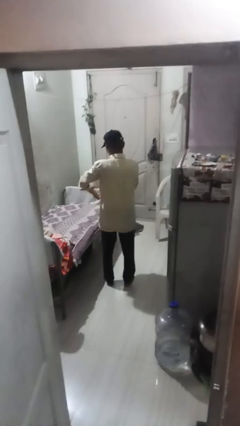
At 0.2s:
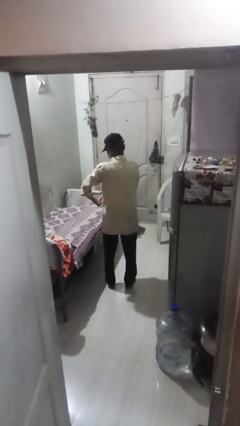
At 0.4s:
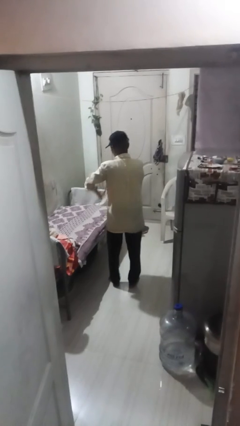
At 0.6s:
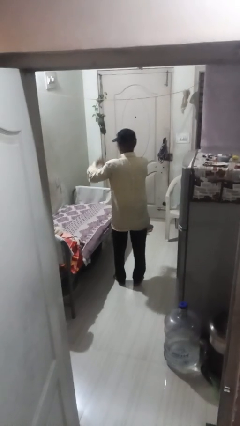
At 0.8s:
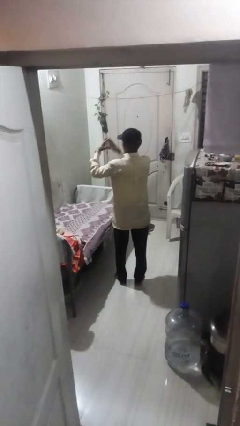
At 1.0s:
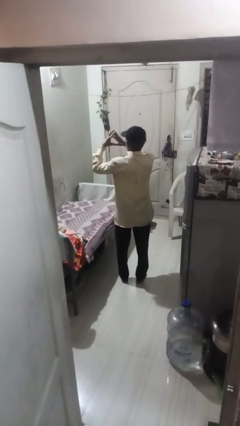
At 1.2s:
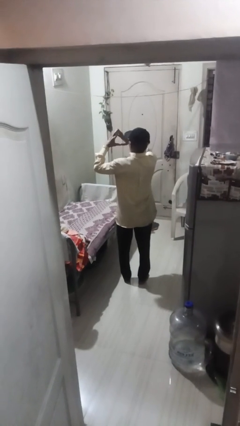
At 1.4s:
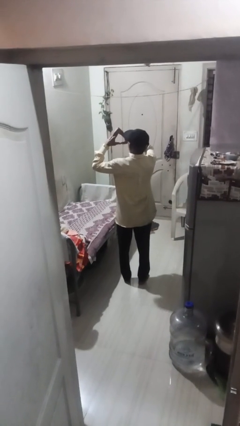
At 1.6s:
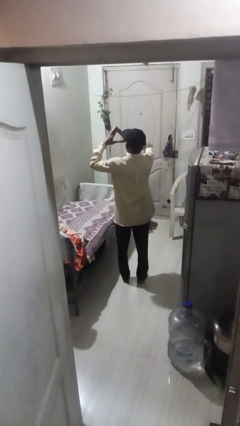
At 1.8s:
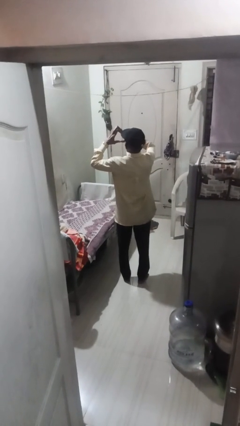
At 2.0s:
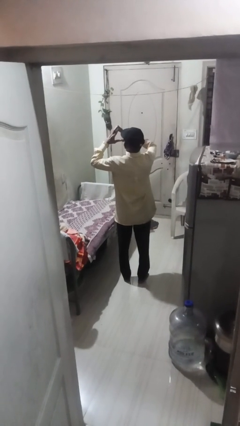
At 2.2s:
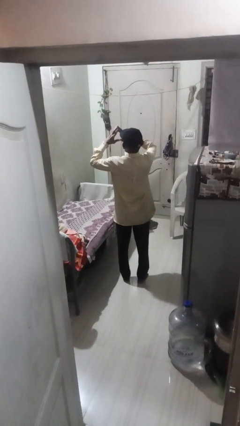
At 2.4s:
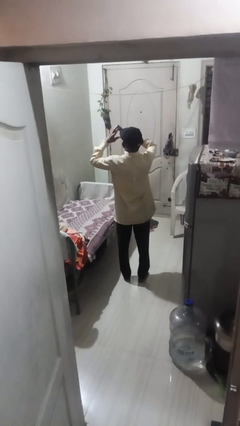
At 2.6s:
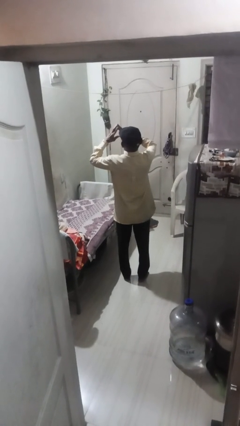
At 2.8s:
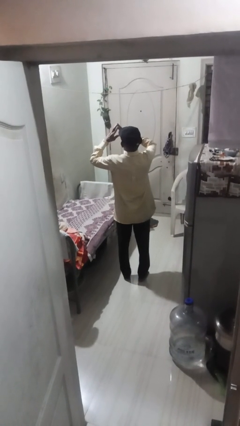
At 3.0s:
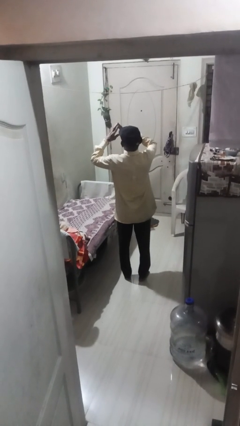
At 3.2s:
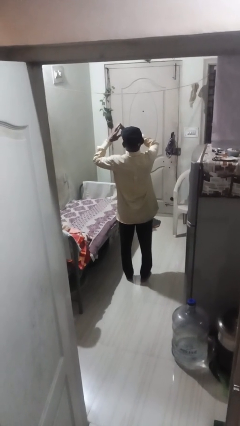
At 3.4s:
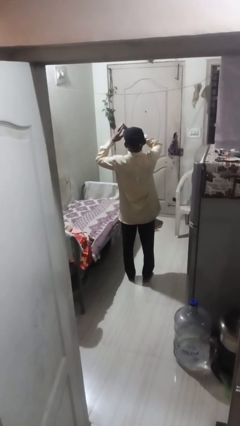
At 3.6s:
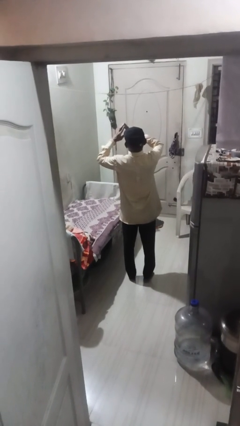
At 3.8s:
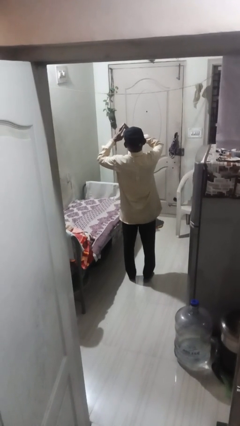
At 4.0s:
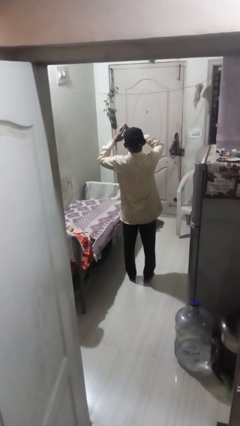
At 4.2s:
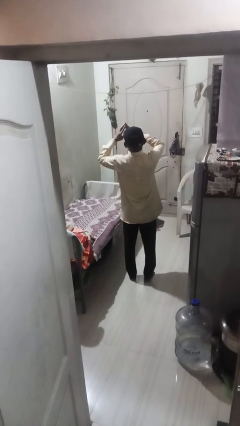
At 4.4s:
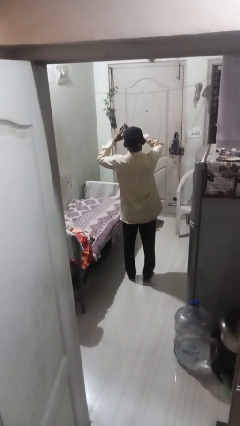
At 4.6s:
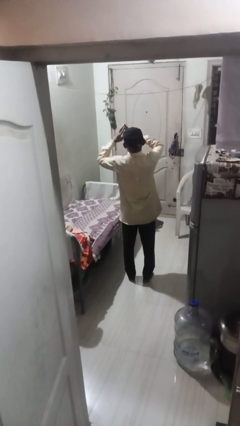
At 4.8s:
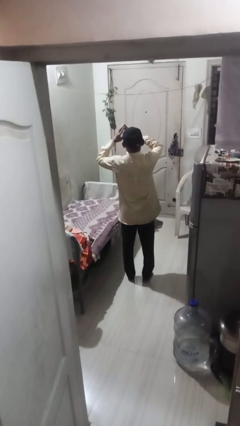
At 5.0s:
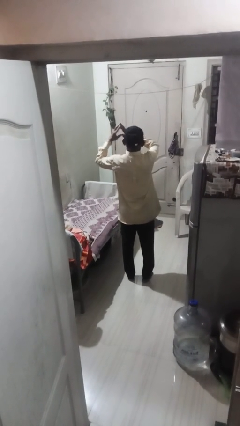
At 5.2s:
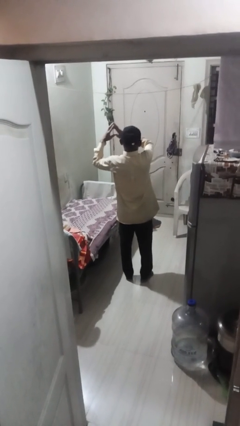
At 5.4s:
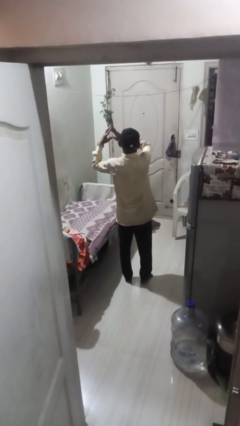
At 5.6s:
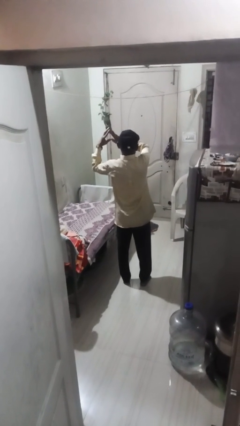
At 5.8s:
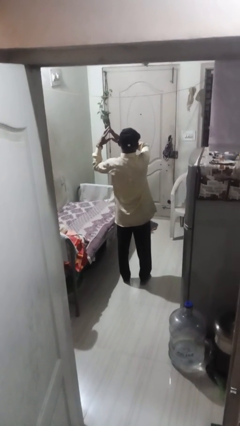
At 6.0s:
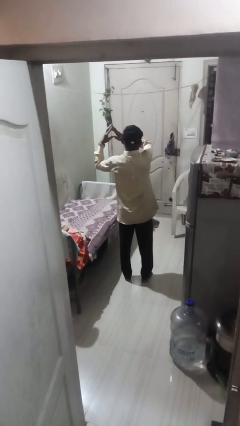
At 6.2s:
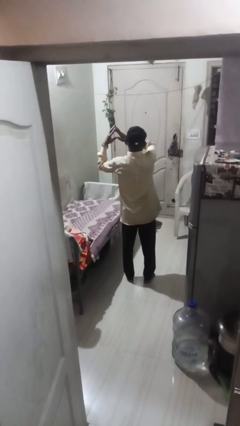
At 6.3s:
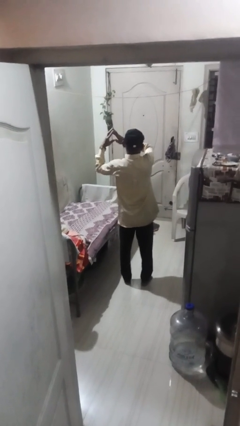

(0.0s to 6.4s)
person gestures heart

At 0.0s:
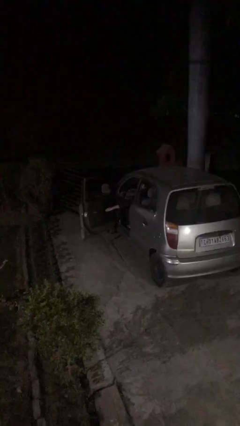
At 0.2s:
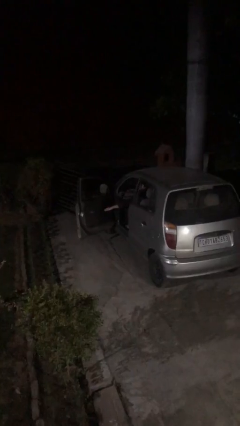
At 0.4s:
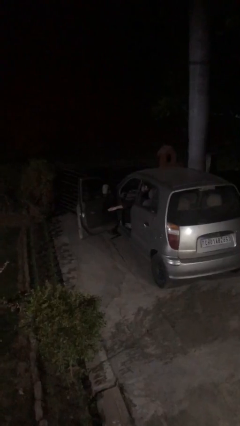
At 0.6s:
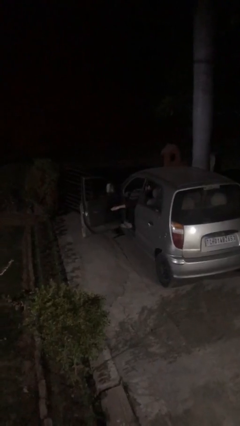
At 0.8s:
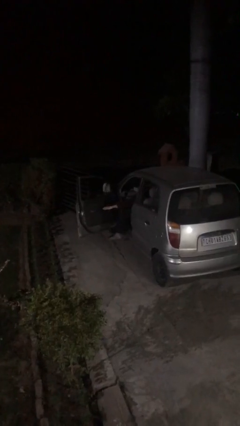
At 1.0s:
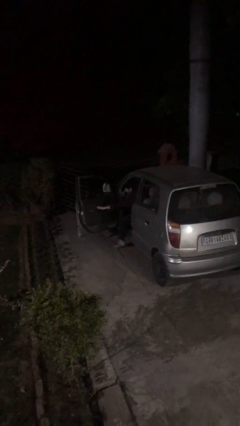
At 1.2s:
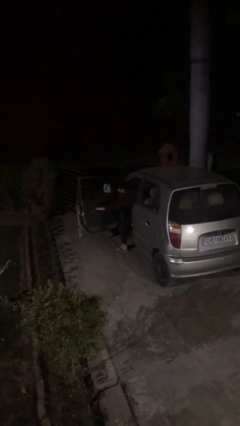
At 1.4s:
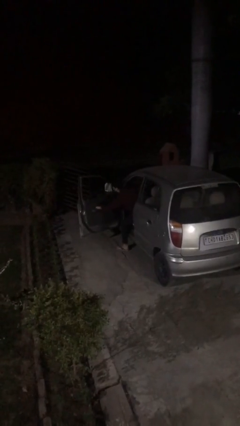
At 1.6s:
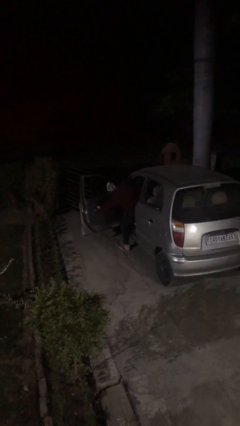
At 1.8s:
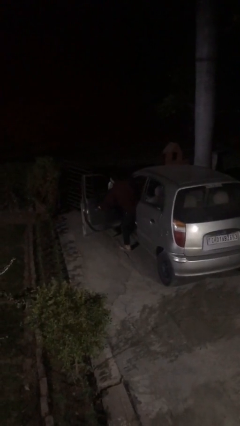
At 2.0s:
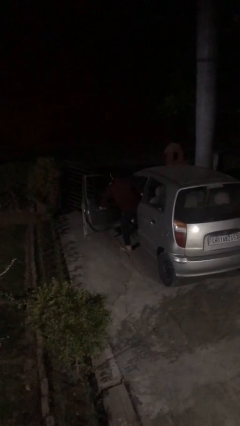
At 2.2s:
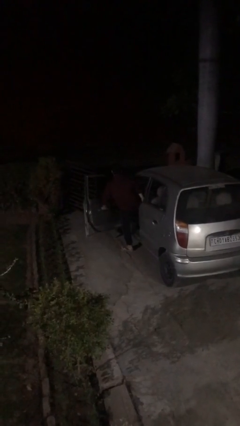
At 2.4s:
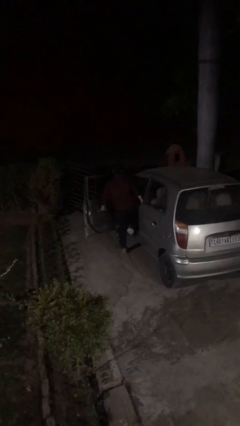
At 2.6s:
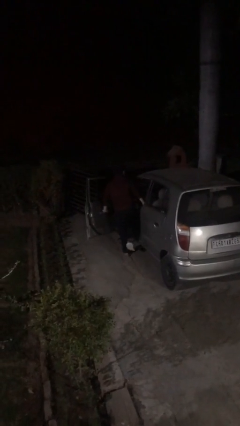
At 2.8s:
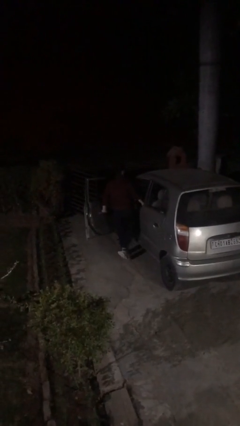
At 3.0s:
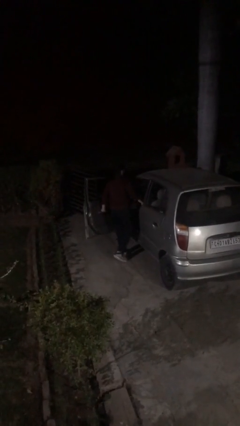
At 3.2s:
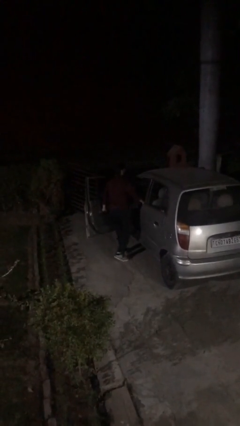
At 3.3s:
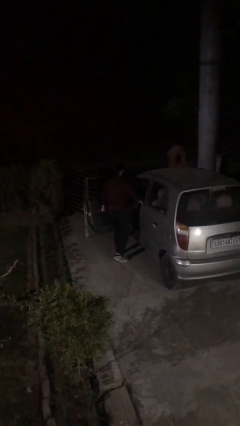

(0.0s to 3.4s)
person exits car

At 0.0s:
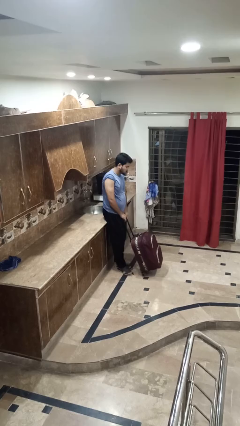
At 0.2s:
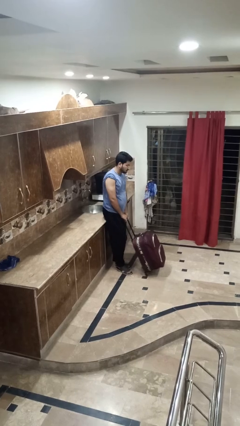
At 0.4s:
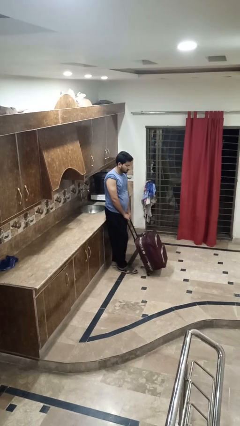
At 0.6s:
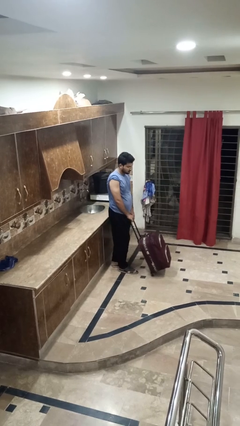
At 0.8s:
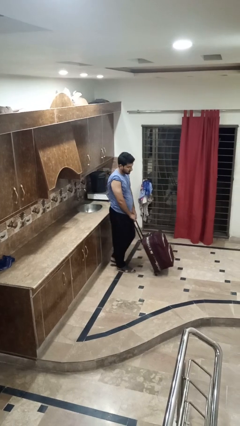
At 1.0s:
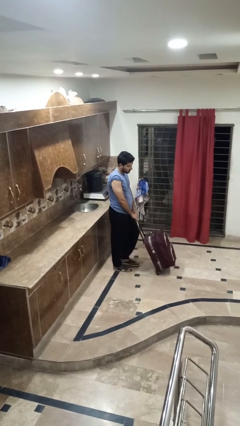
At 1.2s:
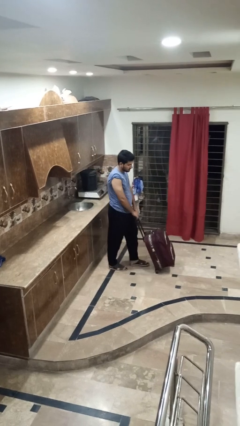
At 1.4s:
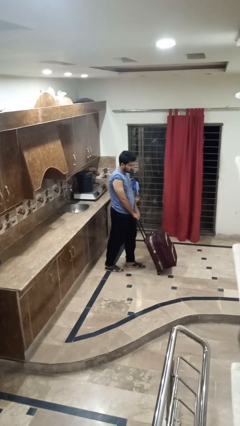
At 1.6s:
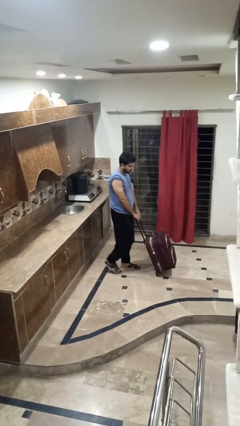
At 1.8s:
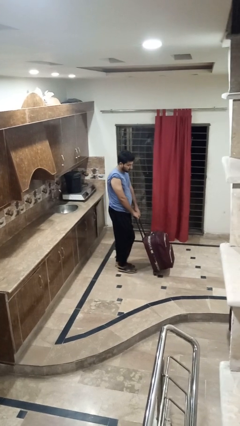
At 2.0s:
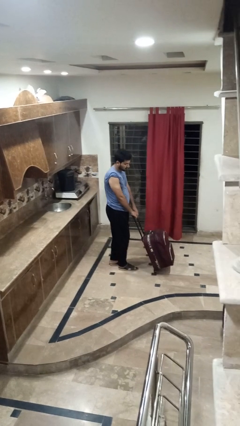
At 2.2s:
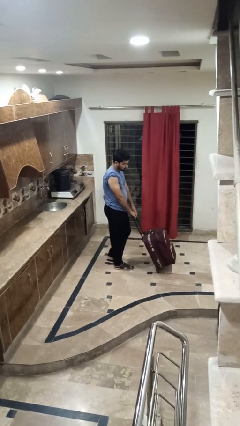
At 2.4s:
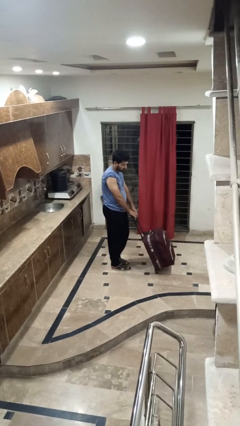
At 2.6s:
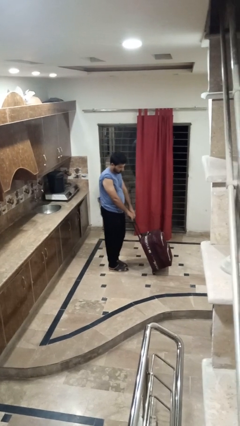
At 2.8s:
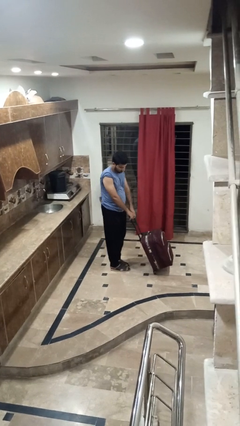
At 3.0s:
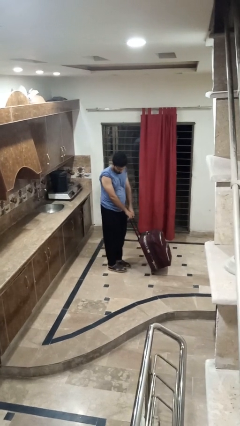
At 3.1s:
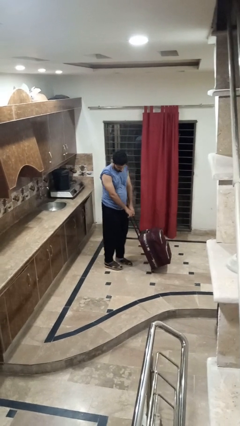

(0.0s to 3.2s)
person pushes wheeled cart

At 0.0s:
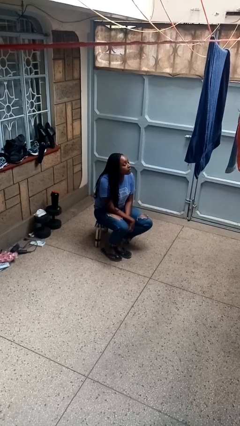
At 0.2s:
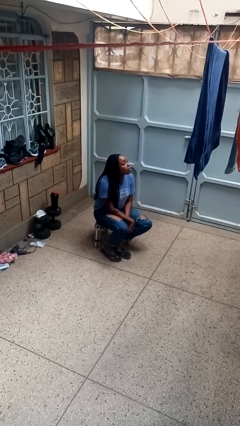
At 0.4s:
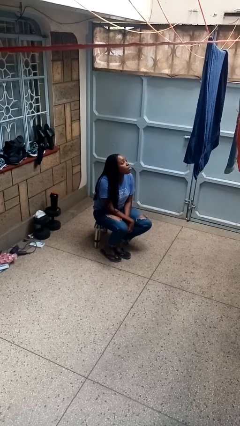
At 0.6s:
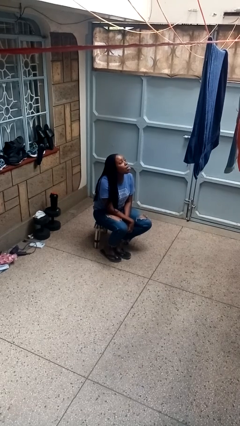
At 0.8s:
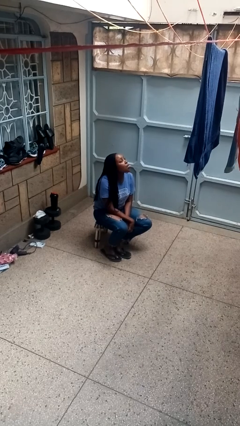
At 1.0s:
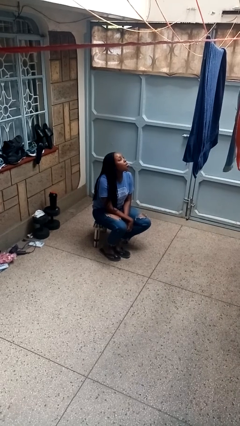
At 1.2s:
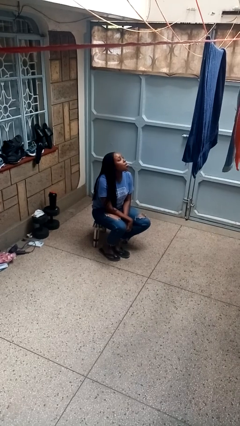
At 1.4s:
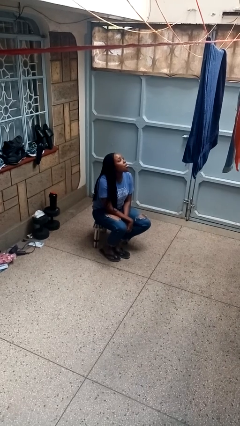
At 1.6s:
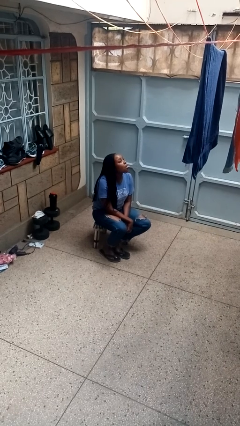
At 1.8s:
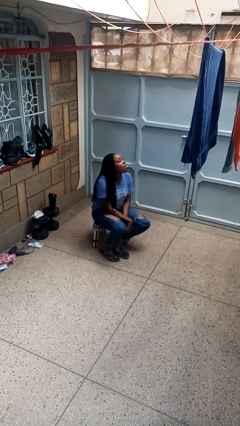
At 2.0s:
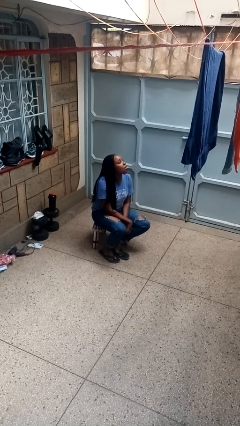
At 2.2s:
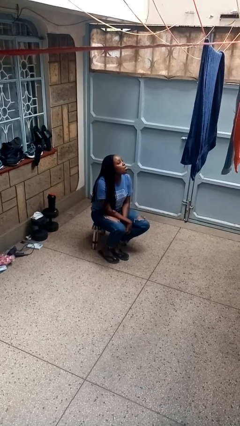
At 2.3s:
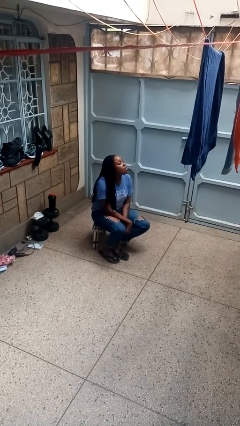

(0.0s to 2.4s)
person sticks out tongue

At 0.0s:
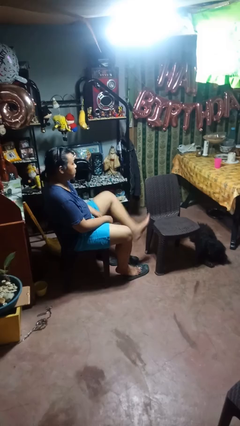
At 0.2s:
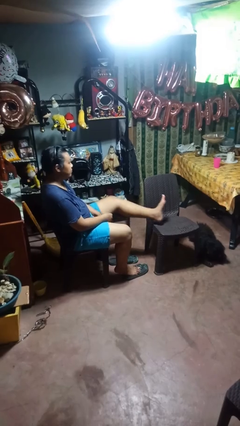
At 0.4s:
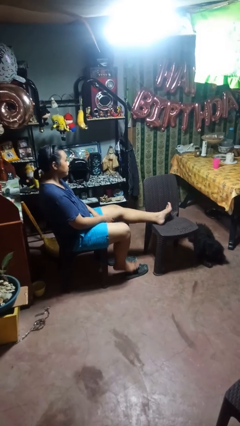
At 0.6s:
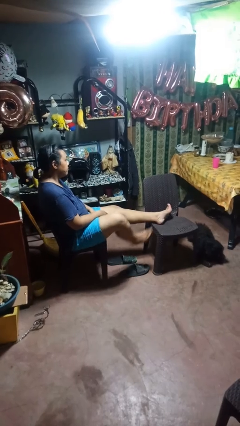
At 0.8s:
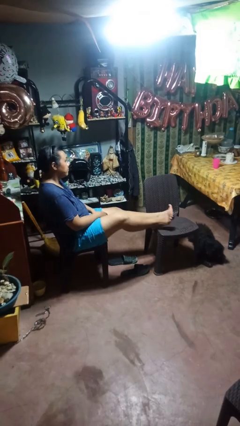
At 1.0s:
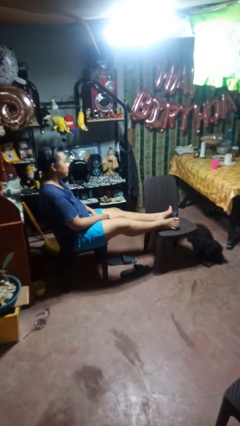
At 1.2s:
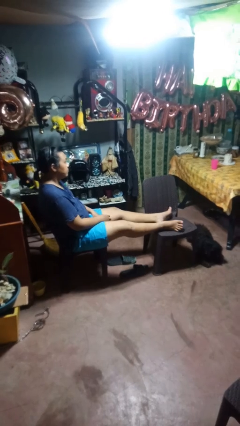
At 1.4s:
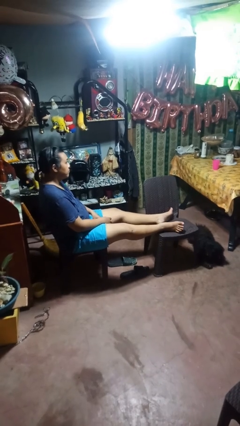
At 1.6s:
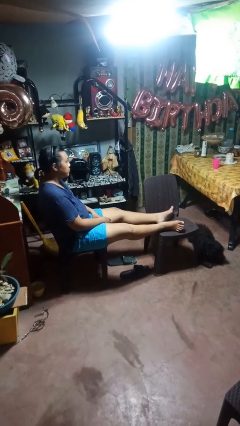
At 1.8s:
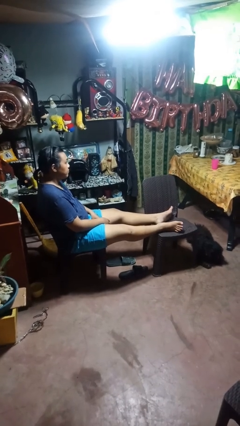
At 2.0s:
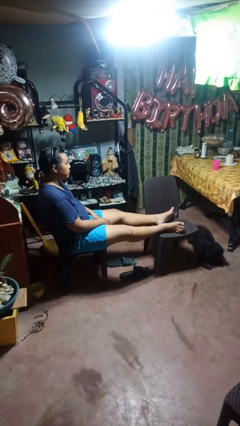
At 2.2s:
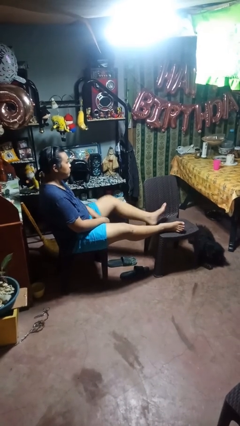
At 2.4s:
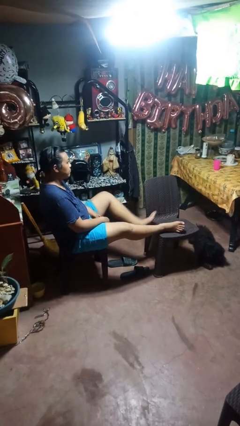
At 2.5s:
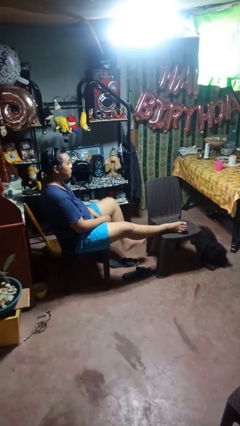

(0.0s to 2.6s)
person puts feet up
